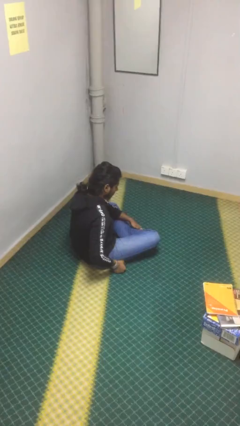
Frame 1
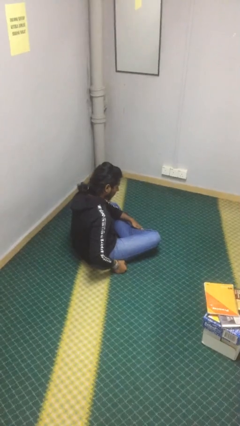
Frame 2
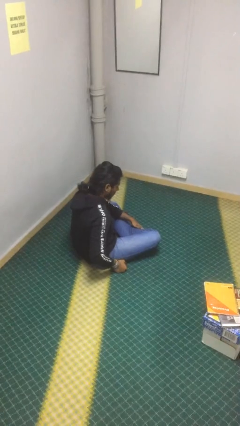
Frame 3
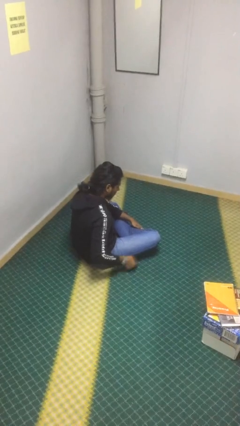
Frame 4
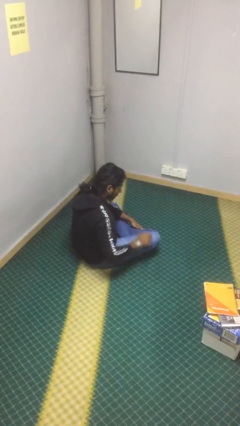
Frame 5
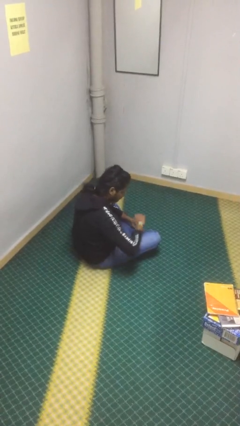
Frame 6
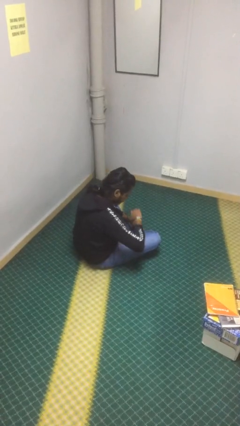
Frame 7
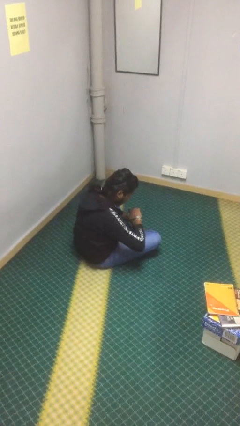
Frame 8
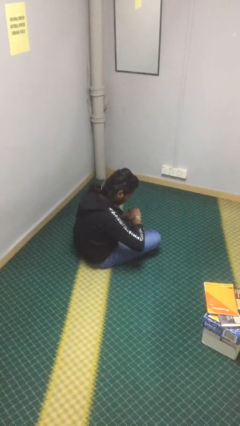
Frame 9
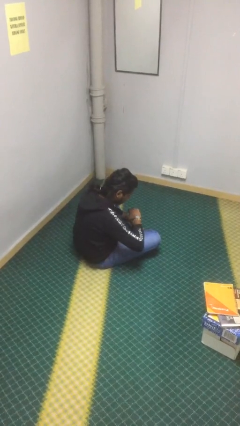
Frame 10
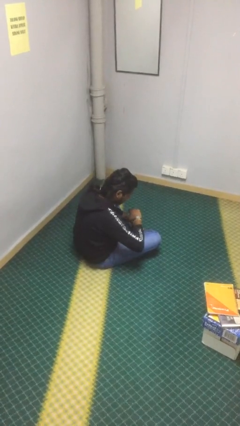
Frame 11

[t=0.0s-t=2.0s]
person looks at wristwatch

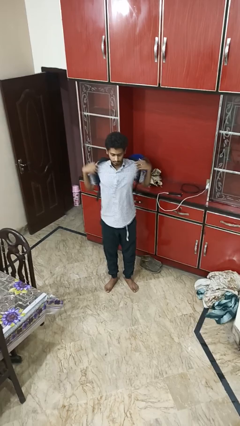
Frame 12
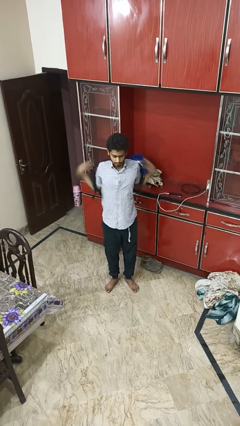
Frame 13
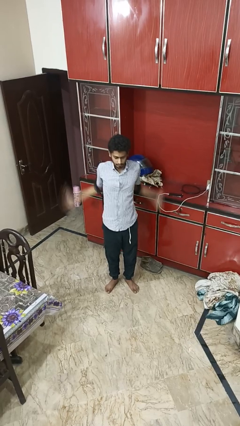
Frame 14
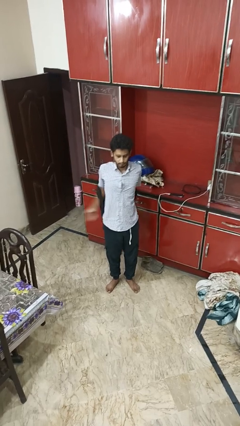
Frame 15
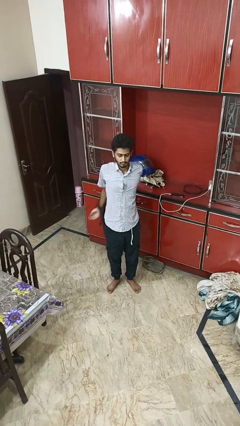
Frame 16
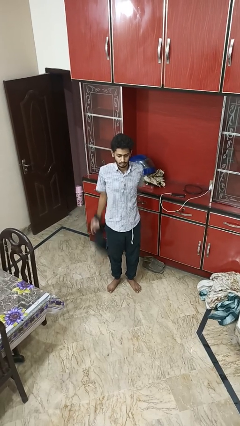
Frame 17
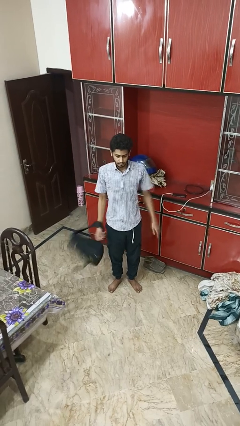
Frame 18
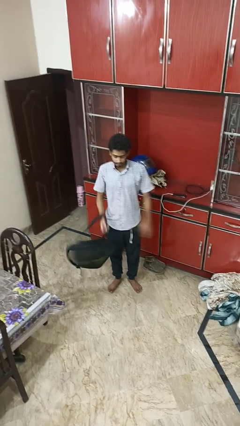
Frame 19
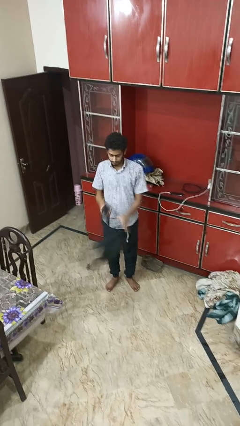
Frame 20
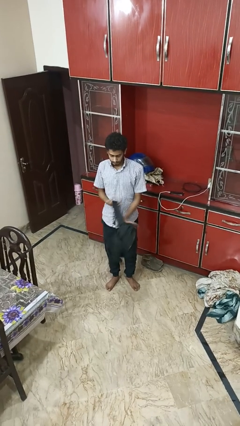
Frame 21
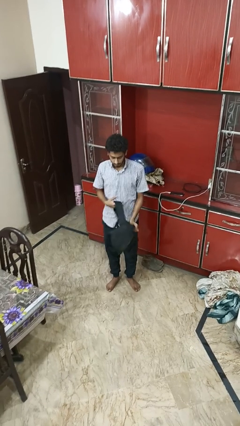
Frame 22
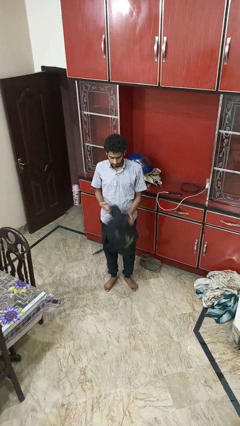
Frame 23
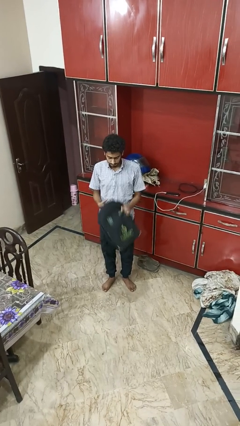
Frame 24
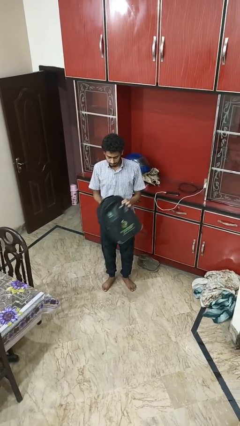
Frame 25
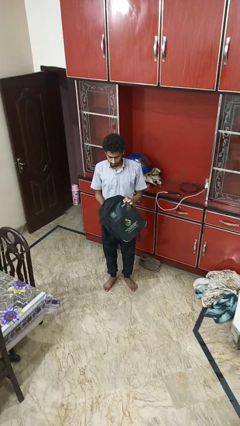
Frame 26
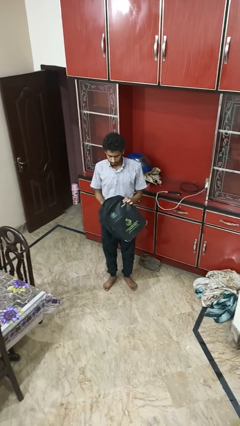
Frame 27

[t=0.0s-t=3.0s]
person takes off backpack

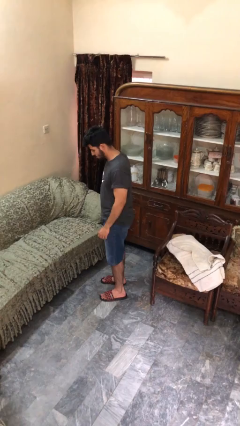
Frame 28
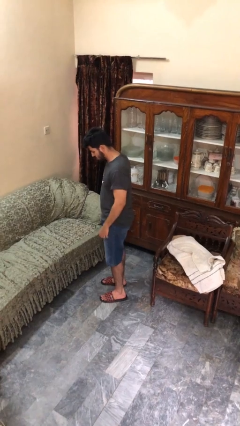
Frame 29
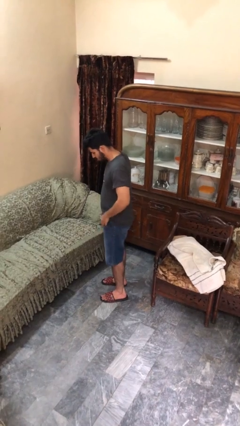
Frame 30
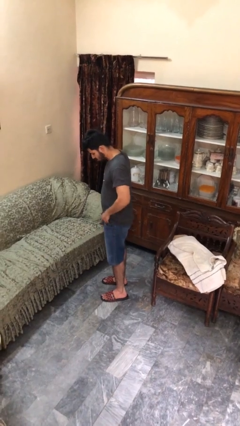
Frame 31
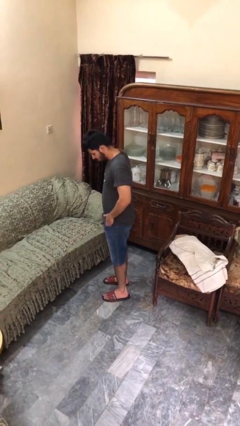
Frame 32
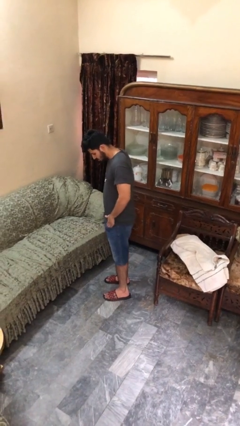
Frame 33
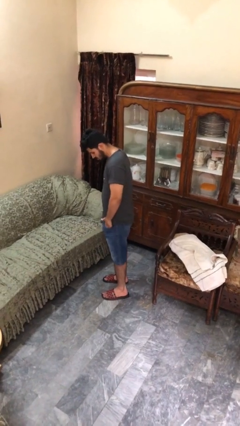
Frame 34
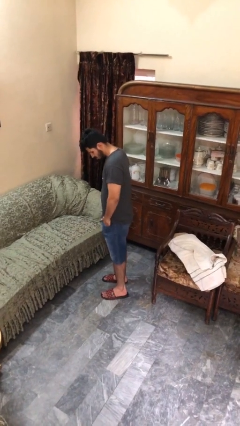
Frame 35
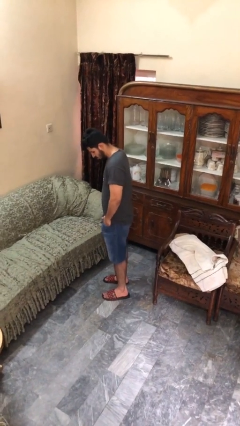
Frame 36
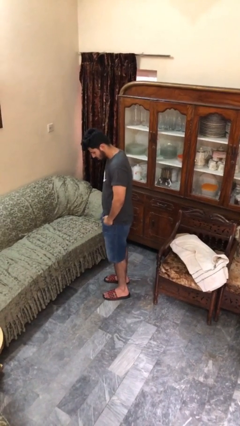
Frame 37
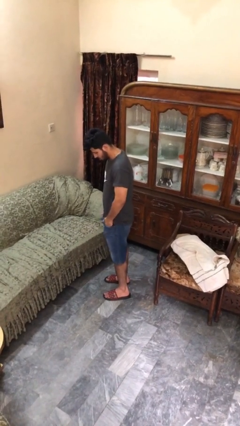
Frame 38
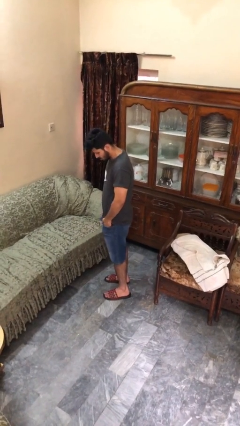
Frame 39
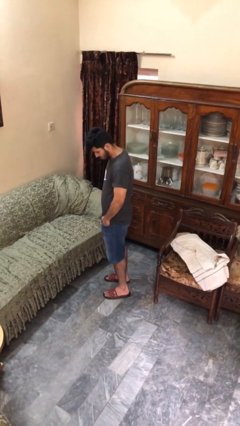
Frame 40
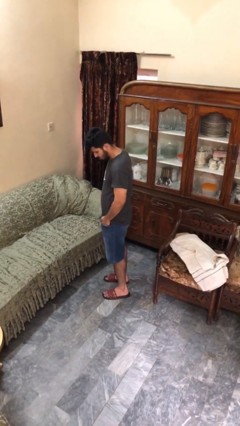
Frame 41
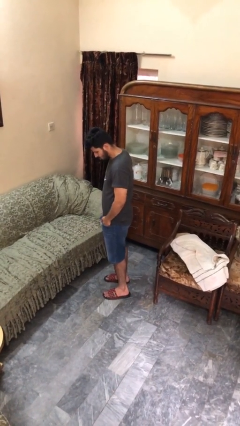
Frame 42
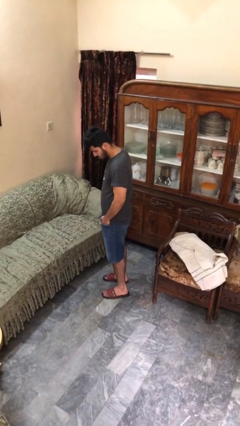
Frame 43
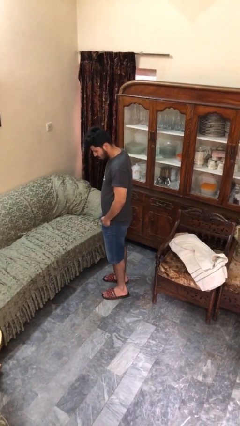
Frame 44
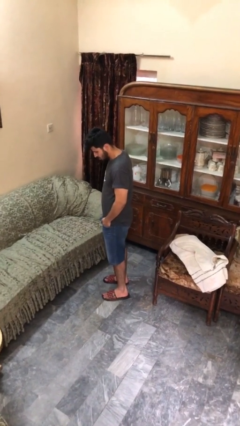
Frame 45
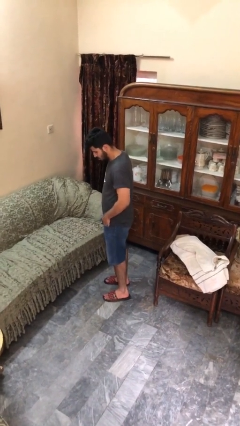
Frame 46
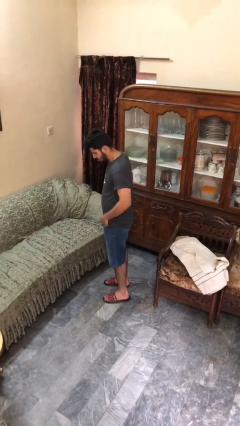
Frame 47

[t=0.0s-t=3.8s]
person puts hands in back pockets

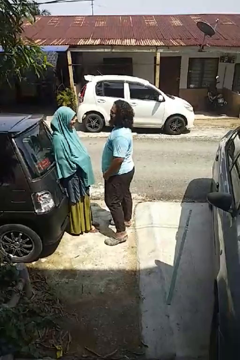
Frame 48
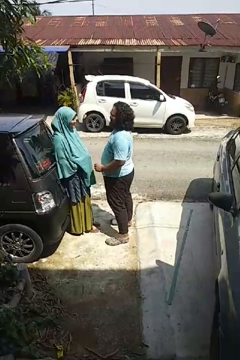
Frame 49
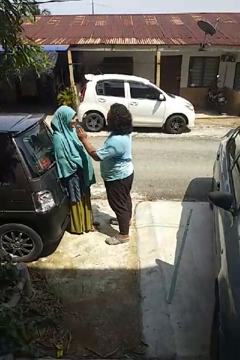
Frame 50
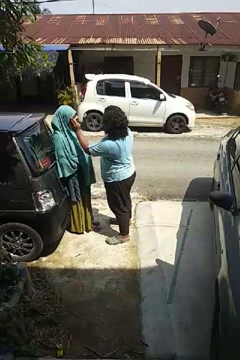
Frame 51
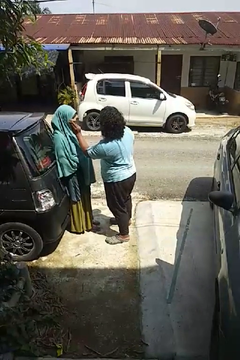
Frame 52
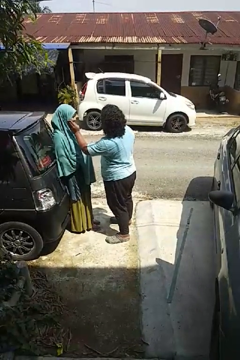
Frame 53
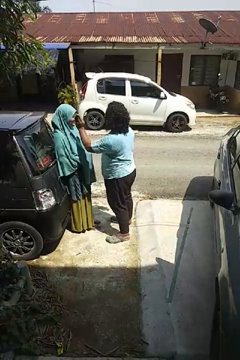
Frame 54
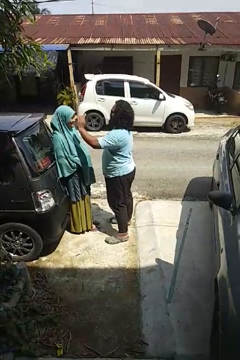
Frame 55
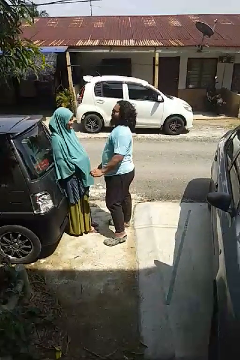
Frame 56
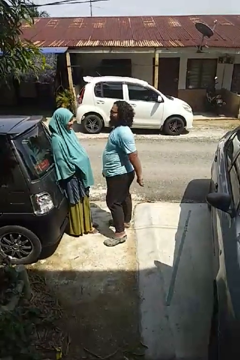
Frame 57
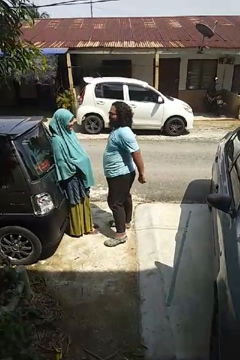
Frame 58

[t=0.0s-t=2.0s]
person touches face of person

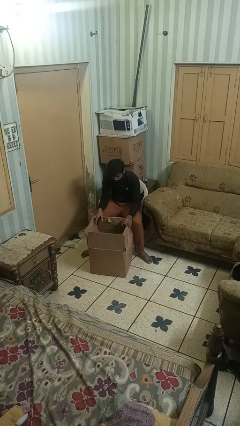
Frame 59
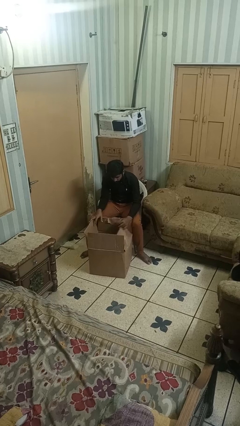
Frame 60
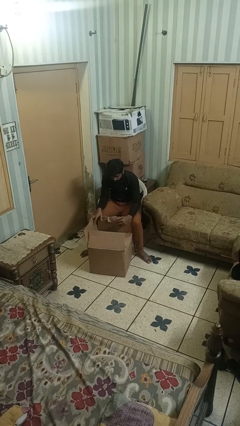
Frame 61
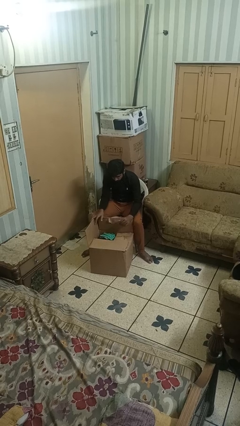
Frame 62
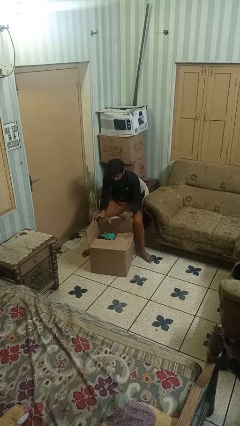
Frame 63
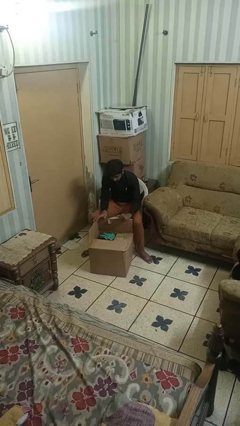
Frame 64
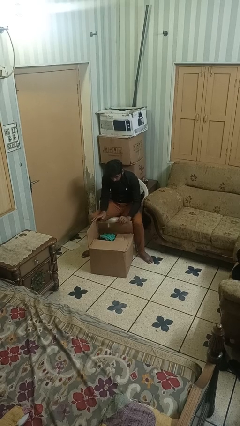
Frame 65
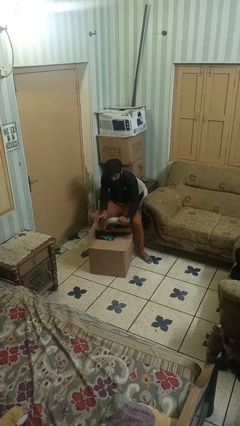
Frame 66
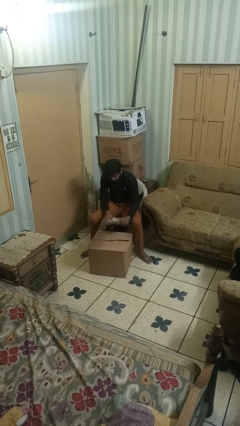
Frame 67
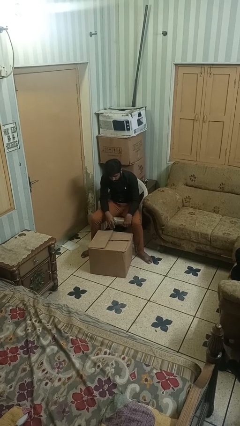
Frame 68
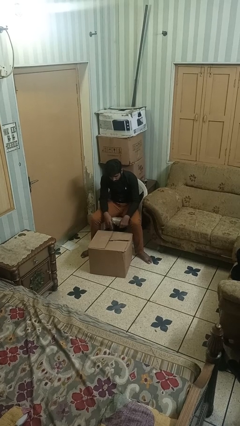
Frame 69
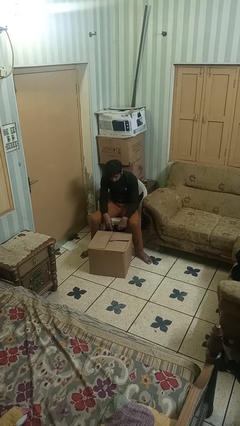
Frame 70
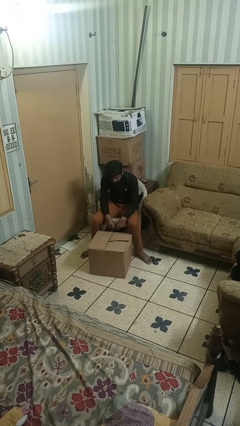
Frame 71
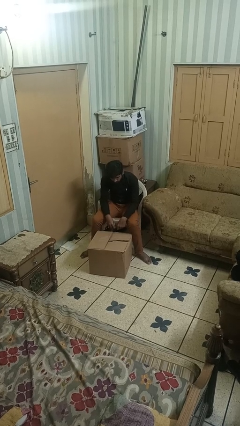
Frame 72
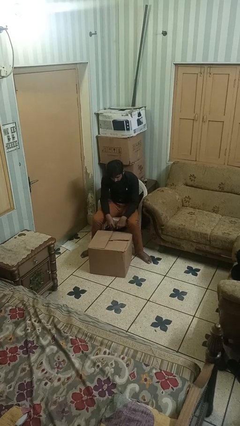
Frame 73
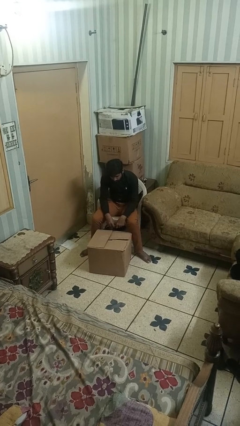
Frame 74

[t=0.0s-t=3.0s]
person closes box

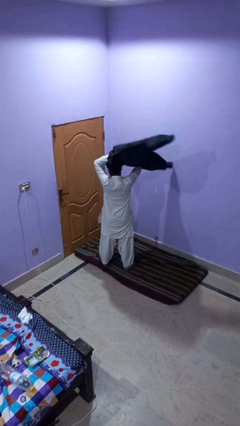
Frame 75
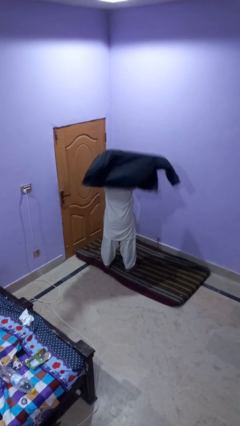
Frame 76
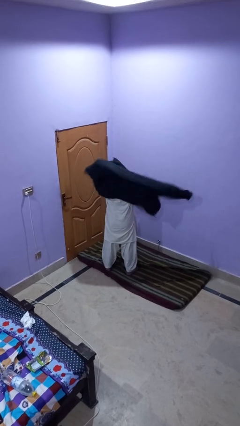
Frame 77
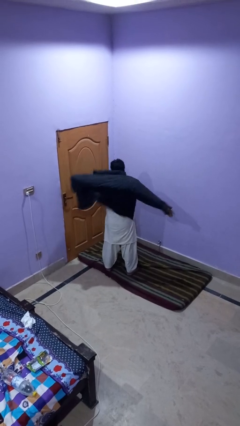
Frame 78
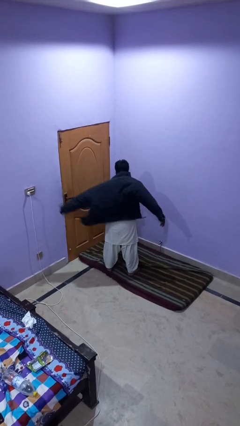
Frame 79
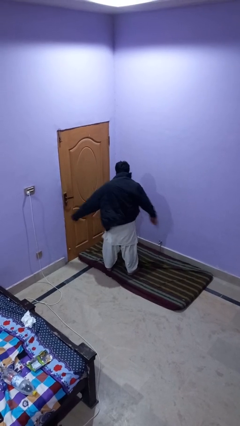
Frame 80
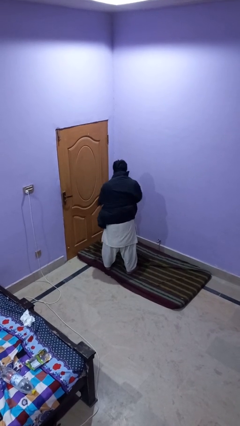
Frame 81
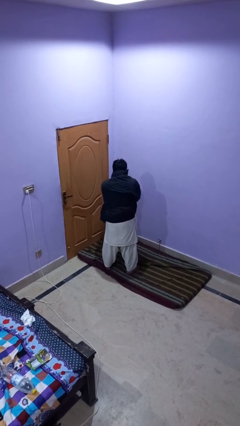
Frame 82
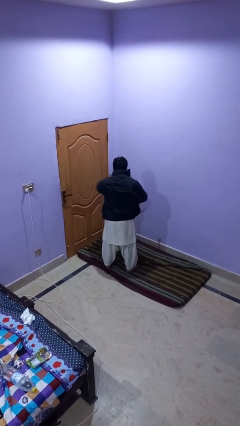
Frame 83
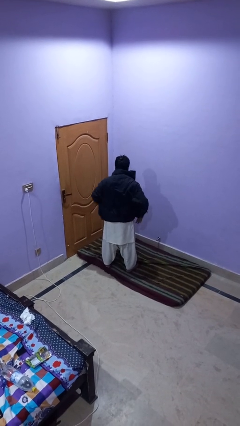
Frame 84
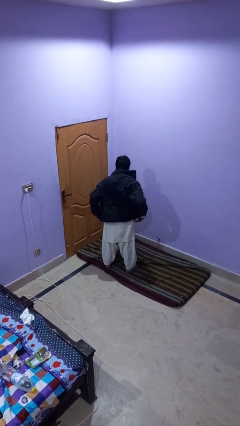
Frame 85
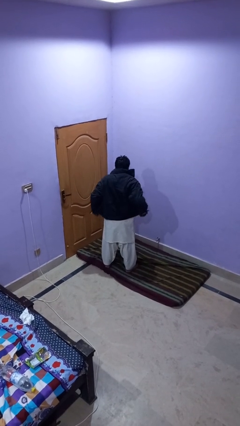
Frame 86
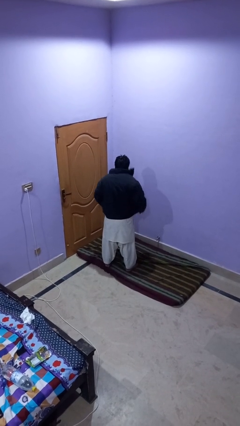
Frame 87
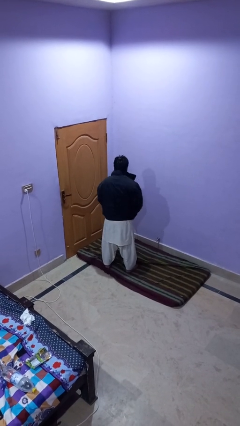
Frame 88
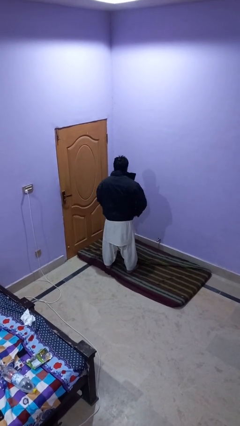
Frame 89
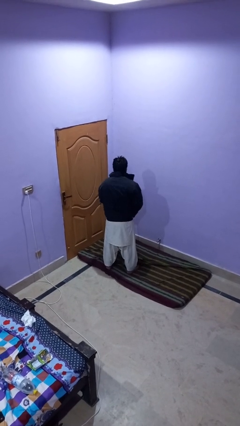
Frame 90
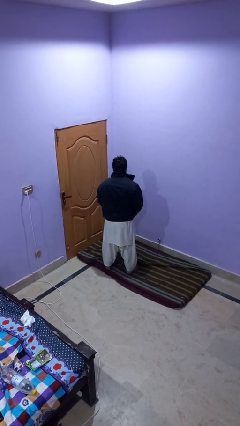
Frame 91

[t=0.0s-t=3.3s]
person puts on jacket

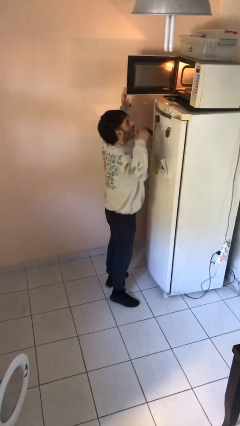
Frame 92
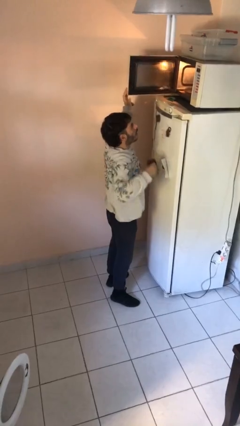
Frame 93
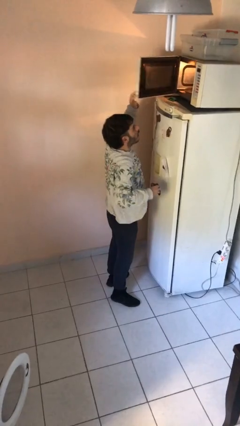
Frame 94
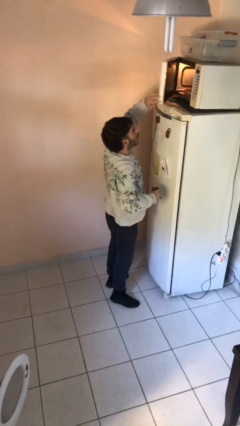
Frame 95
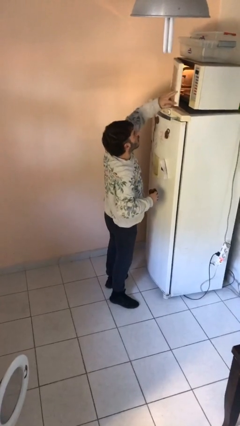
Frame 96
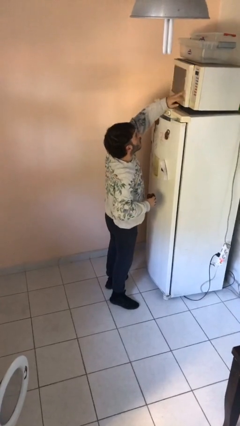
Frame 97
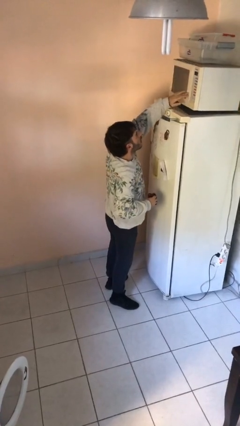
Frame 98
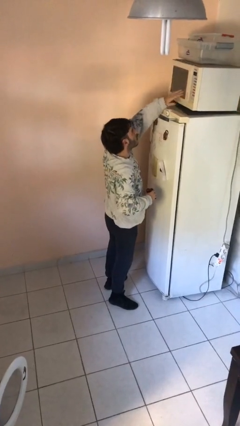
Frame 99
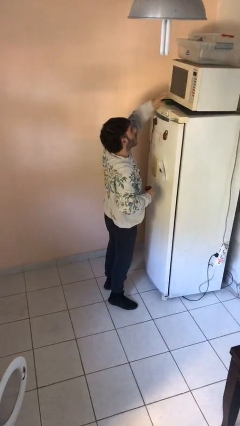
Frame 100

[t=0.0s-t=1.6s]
person closes microwave
